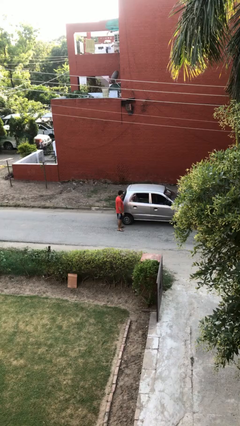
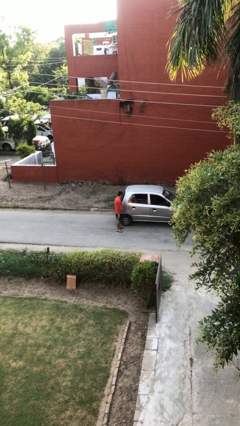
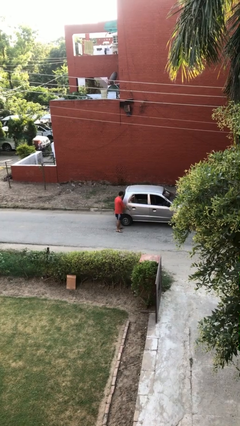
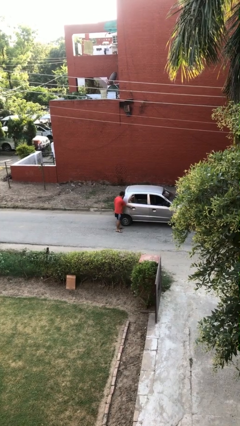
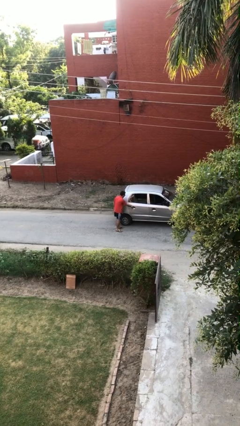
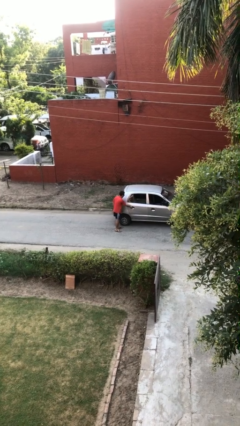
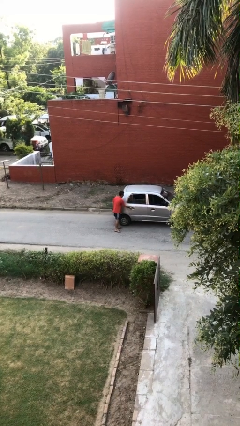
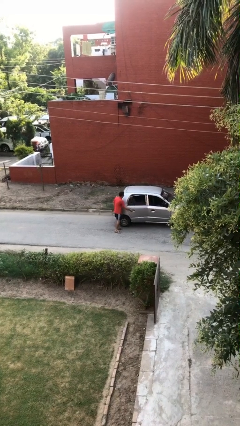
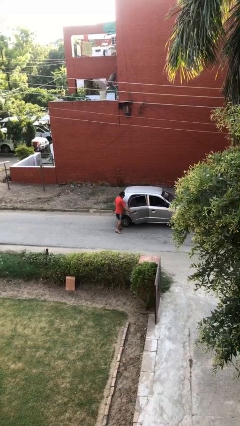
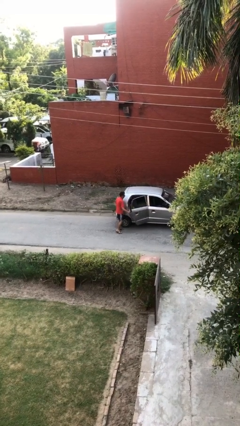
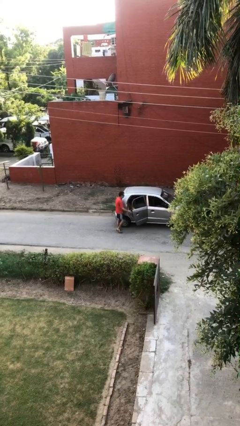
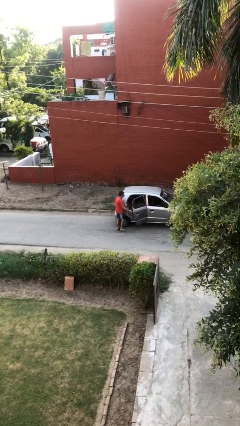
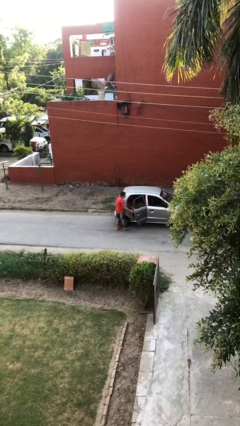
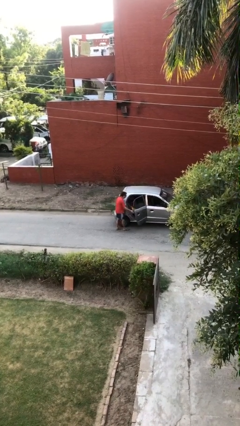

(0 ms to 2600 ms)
person opens car door

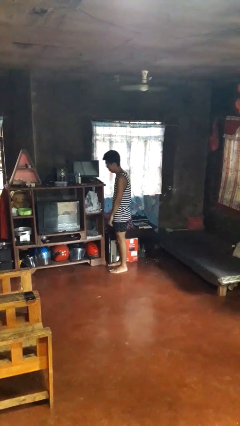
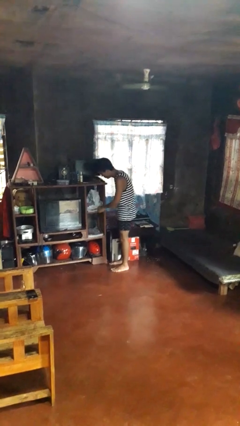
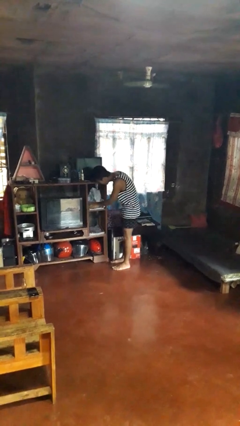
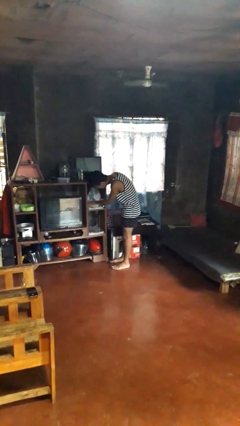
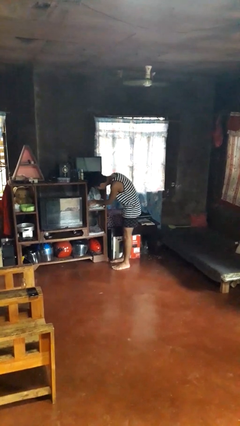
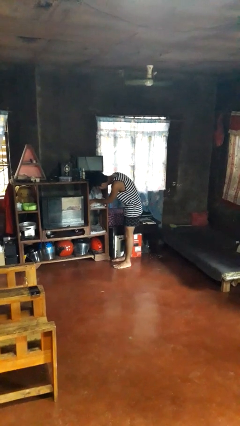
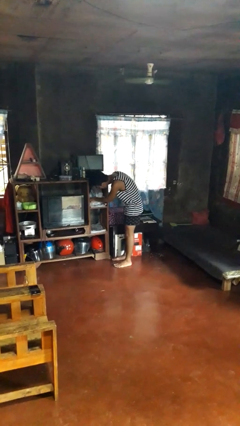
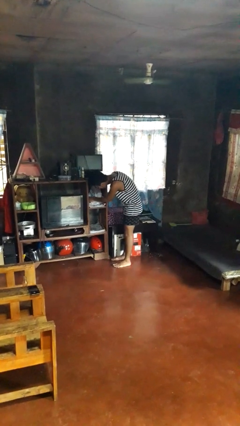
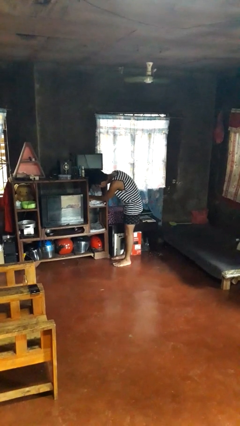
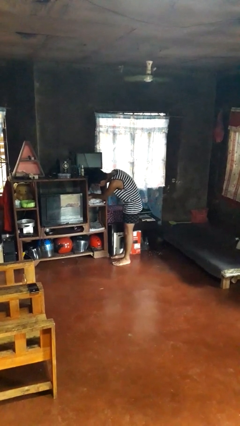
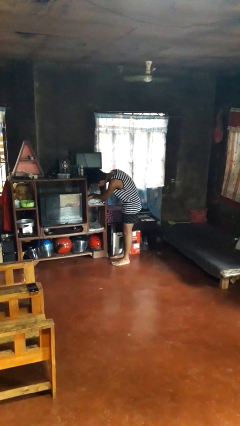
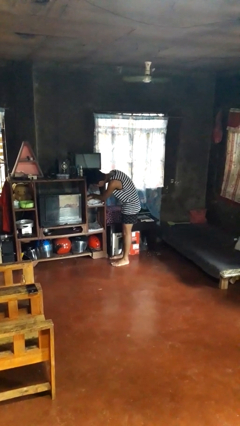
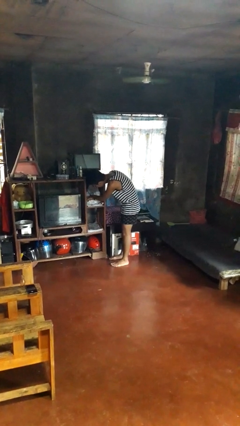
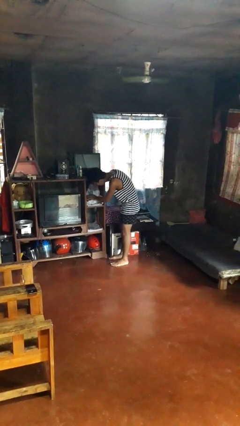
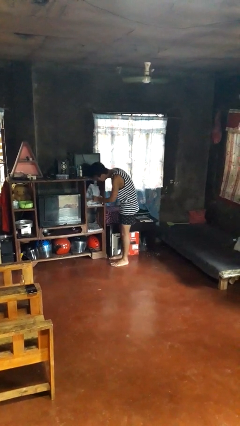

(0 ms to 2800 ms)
person searches in cabinet

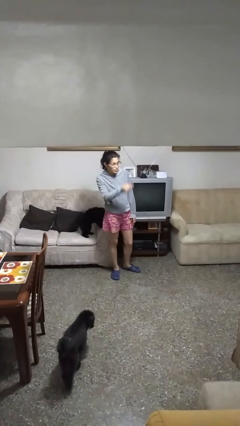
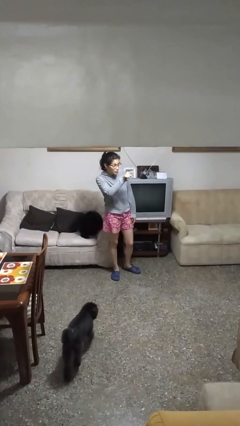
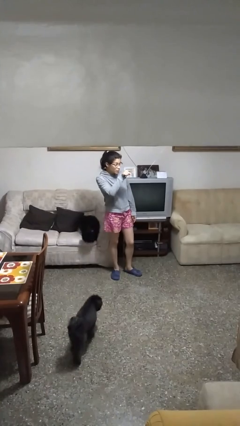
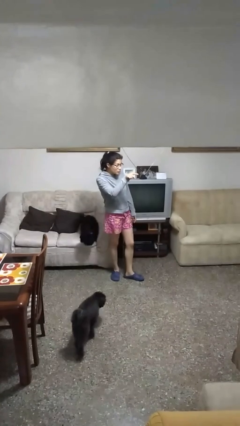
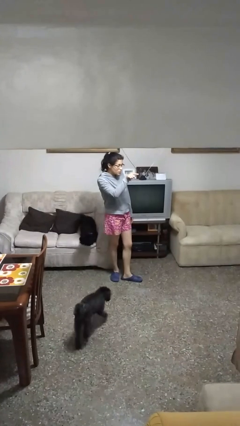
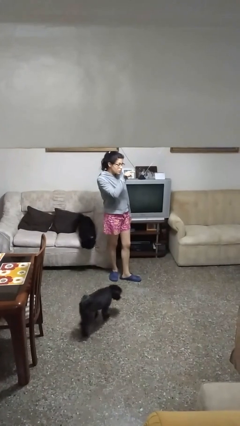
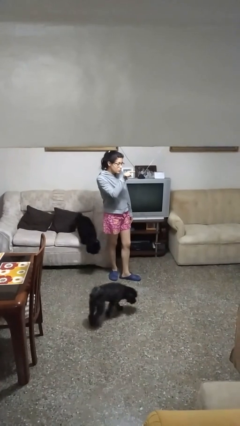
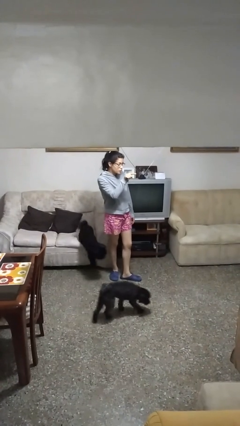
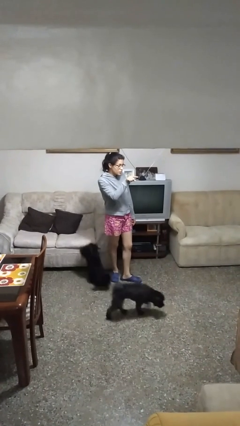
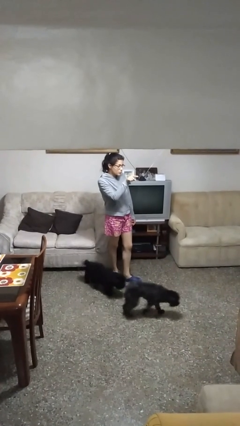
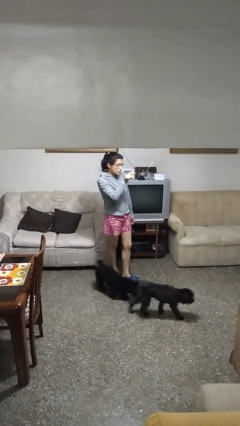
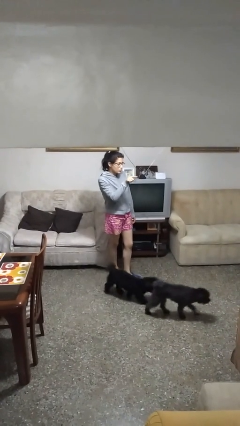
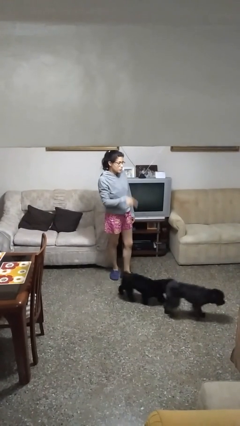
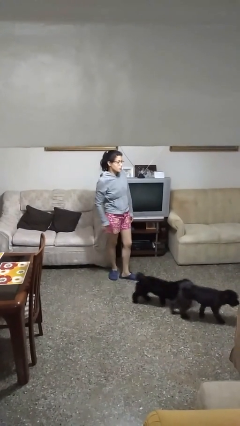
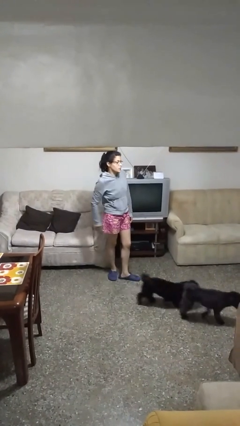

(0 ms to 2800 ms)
person points at person

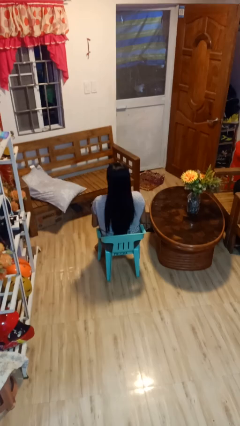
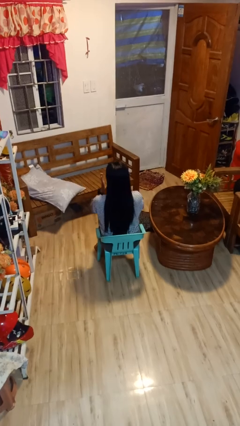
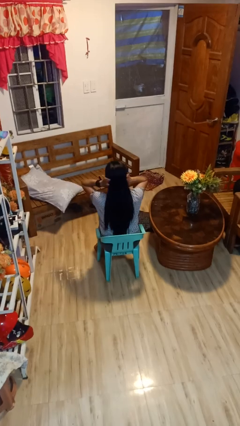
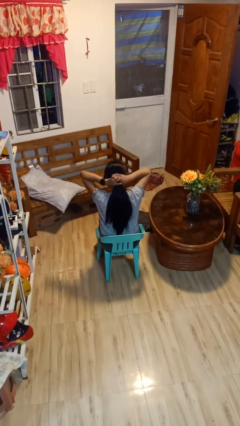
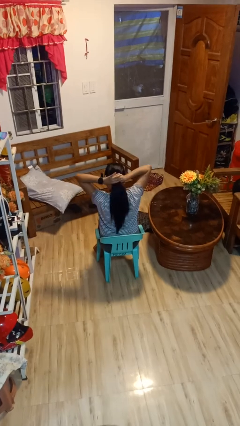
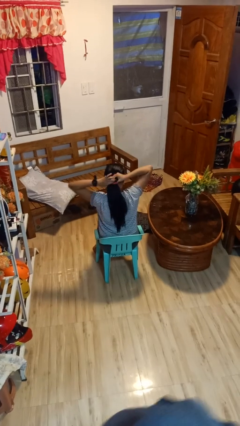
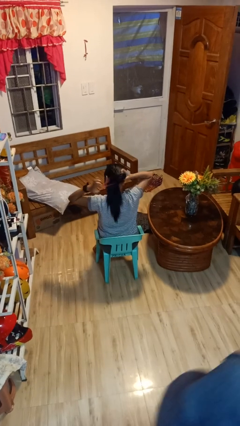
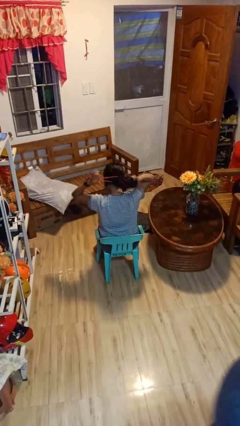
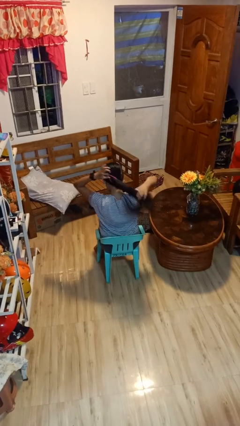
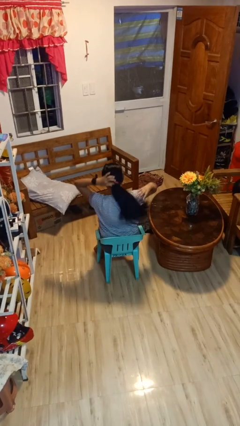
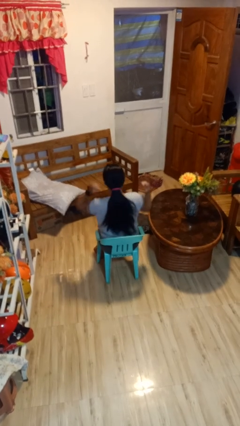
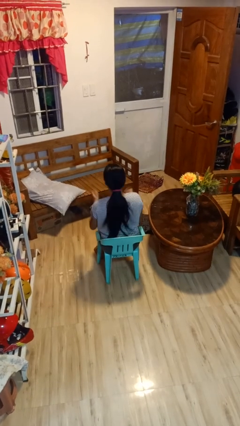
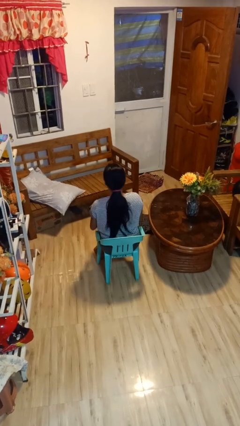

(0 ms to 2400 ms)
person puts hair in ponytail

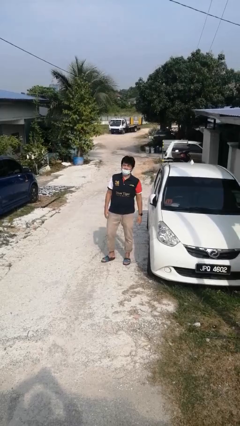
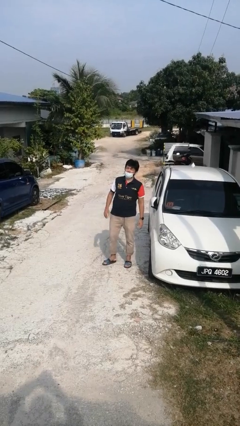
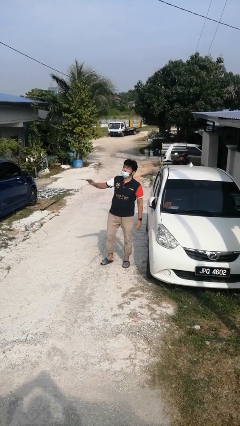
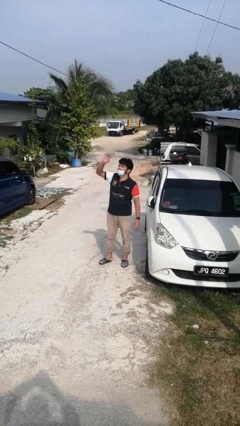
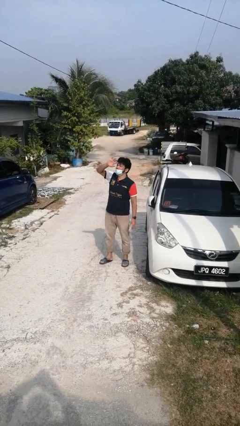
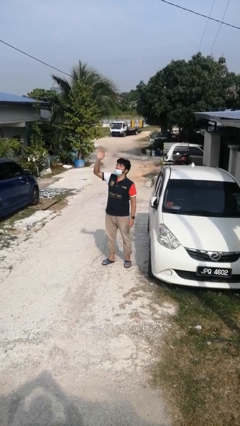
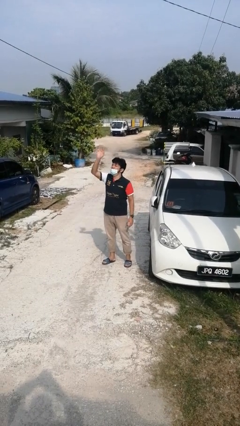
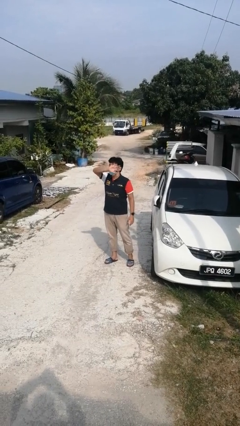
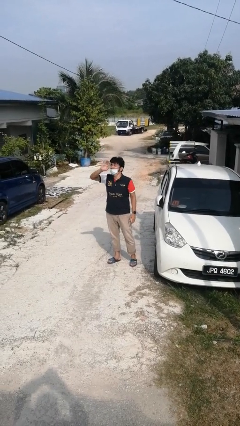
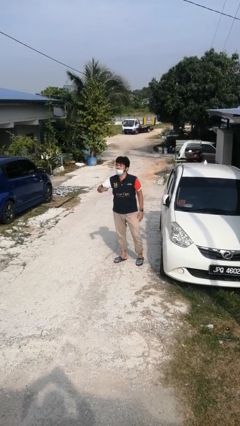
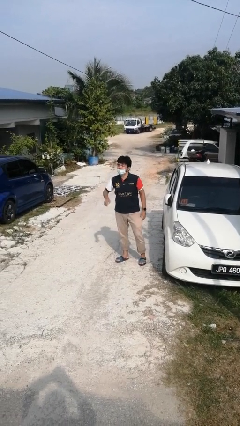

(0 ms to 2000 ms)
person waves at person

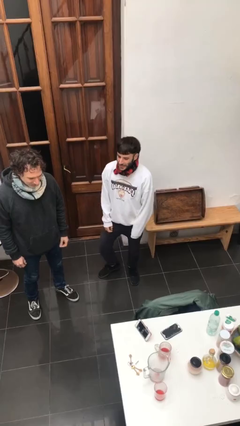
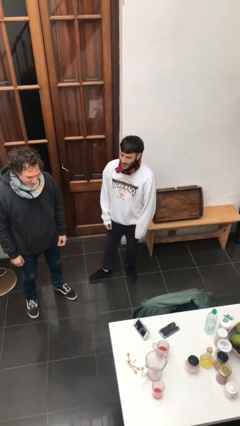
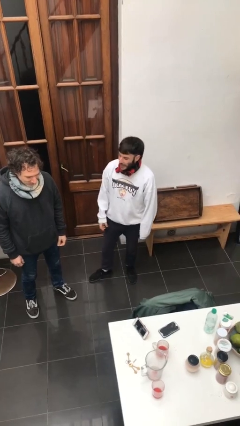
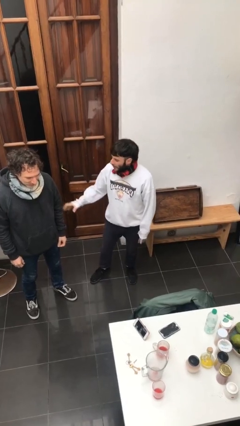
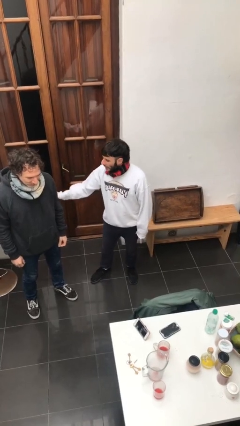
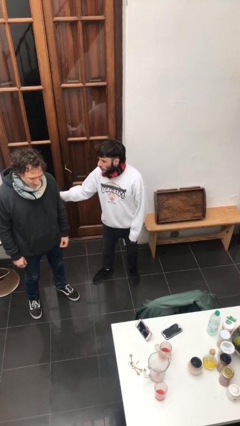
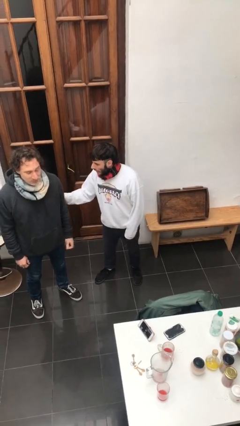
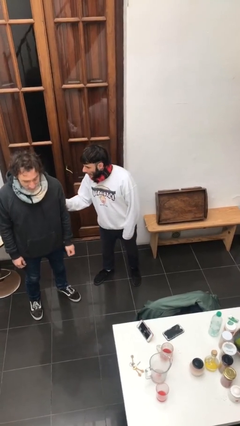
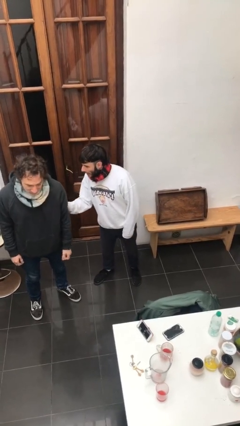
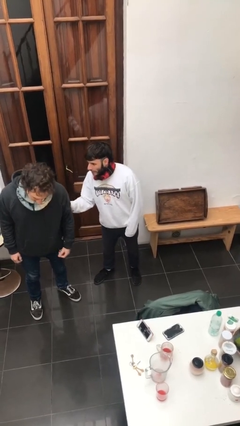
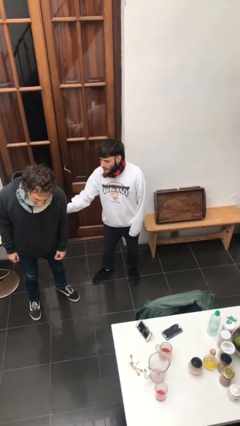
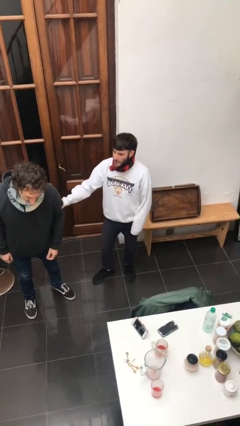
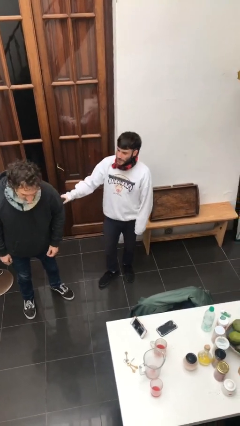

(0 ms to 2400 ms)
person grabs person by bicep

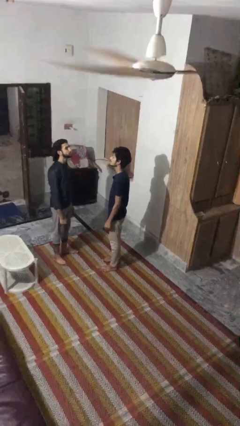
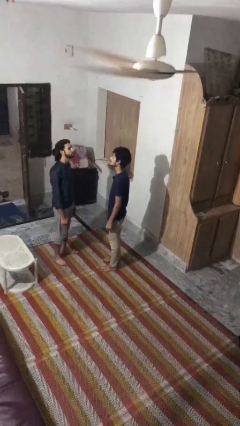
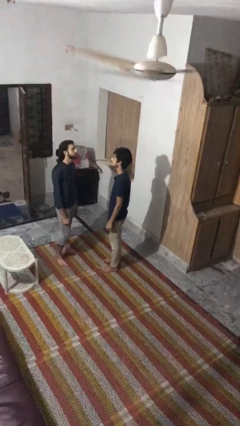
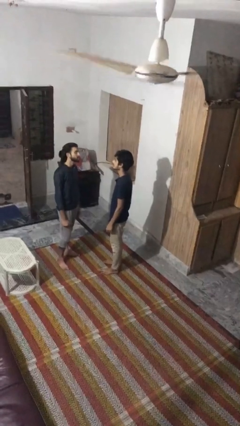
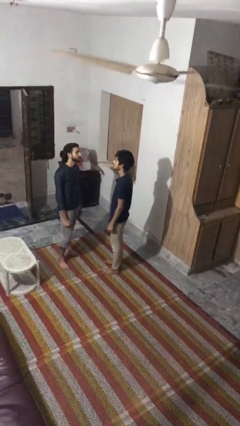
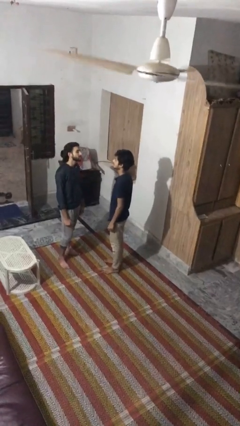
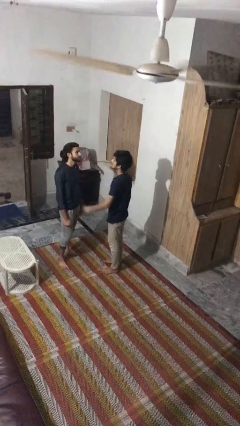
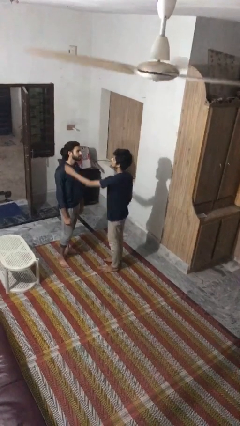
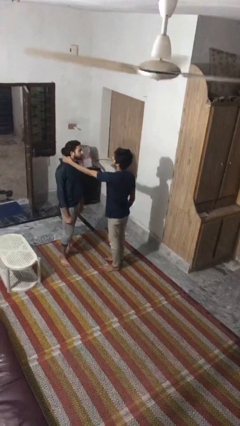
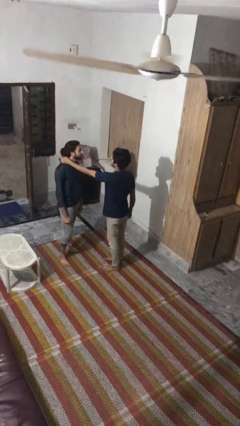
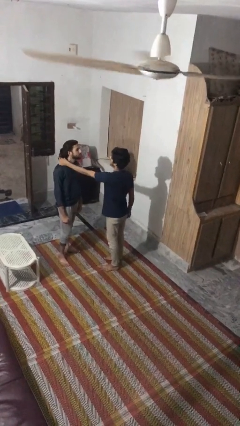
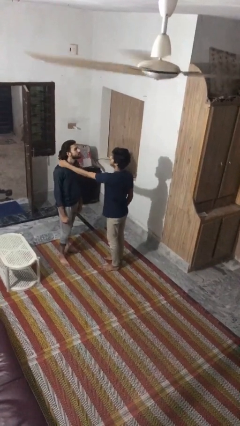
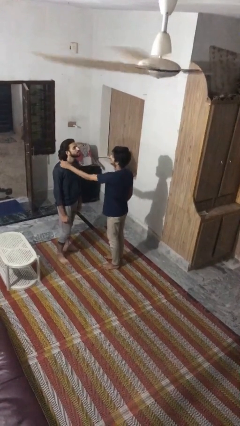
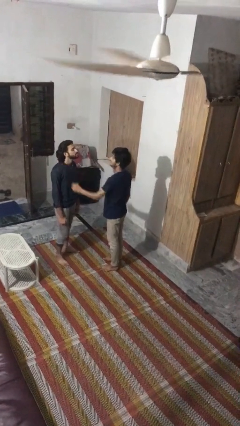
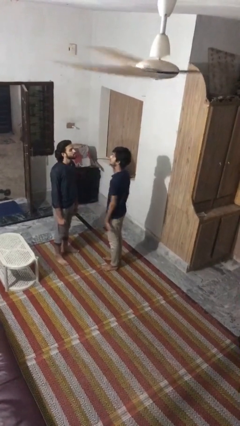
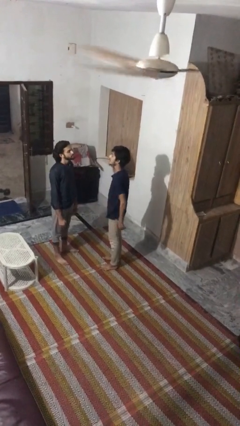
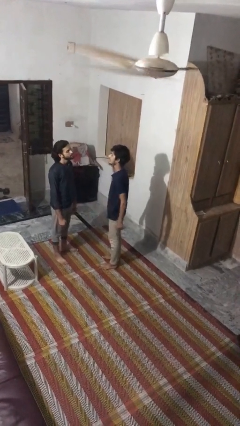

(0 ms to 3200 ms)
person grabs person by hair
